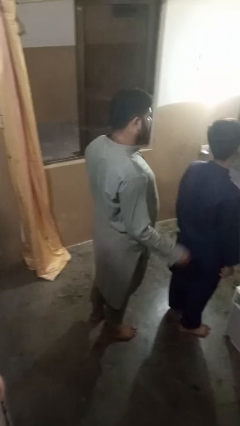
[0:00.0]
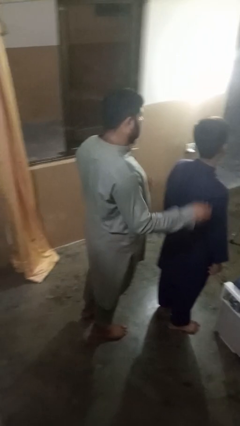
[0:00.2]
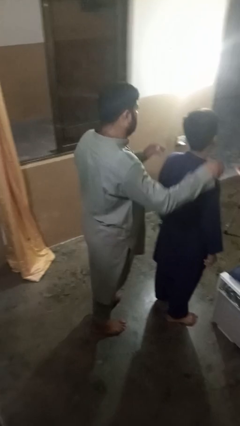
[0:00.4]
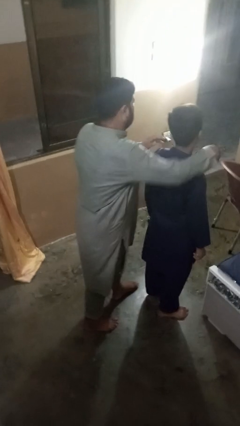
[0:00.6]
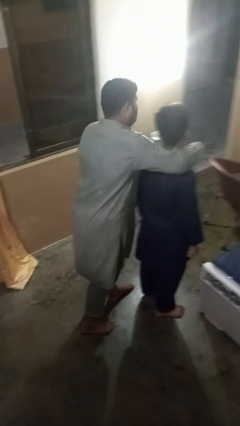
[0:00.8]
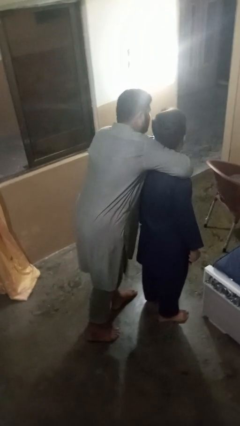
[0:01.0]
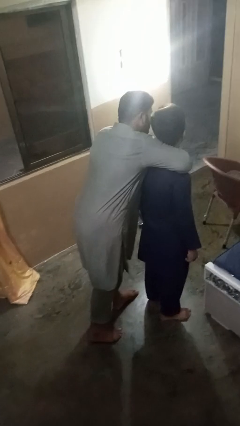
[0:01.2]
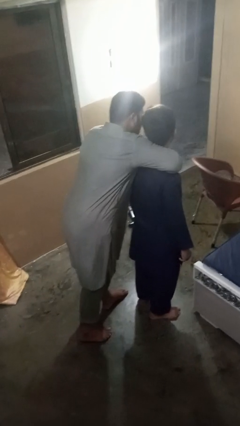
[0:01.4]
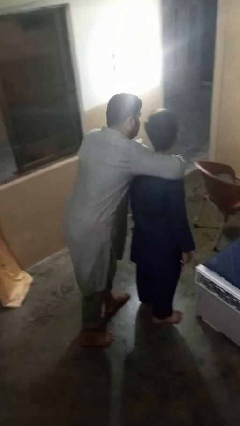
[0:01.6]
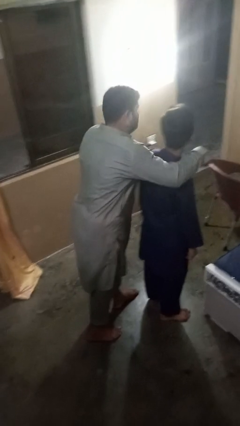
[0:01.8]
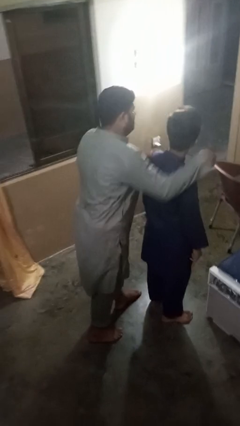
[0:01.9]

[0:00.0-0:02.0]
person hugs person from behind

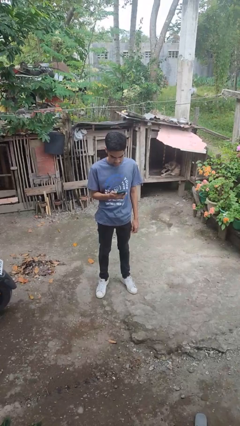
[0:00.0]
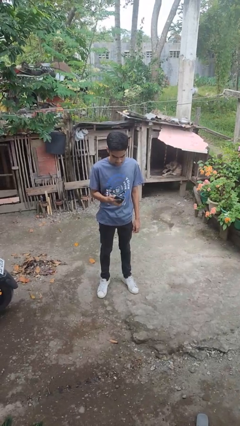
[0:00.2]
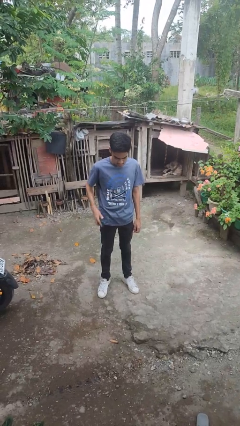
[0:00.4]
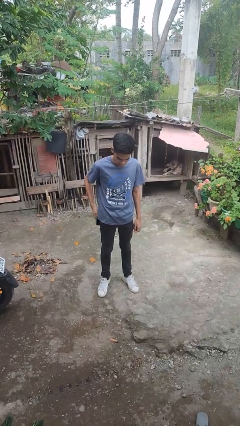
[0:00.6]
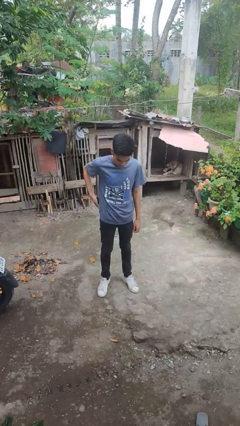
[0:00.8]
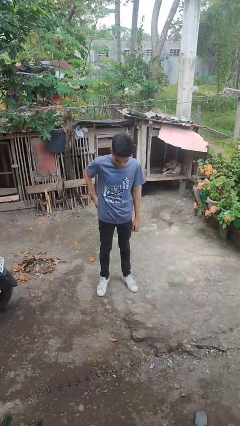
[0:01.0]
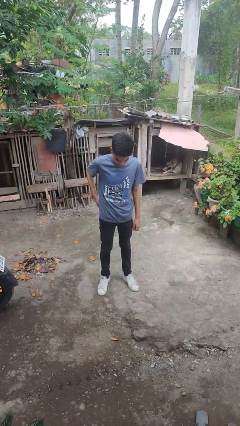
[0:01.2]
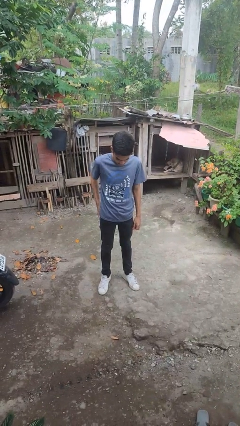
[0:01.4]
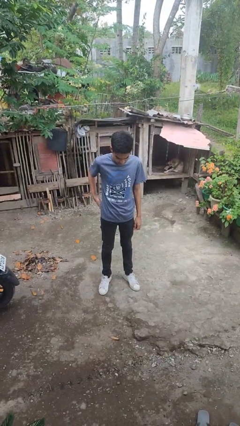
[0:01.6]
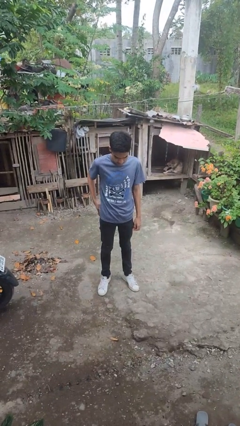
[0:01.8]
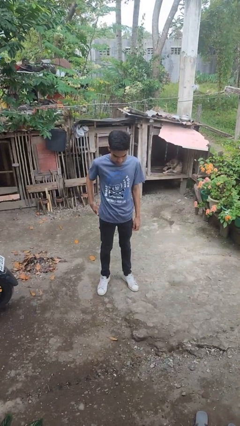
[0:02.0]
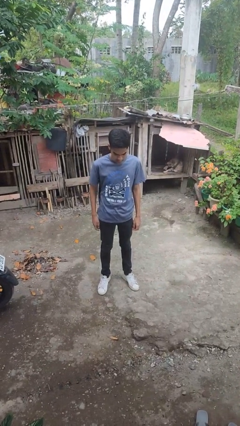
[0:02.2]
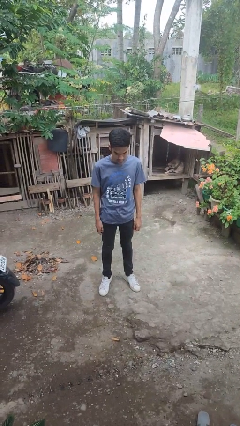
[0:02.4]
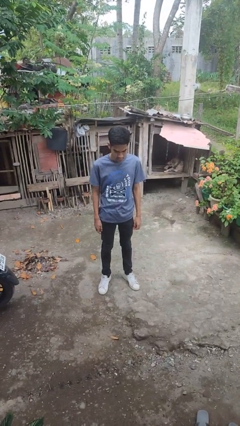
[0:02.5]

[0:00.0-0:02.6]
person puts phone into pocket

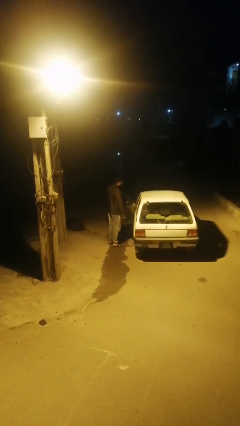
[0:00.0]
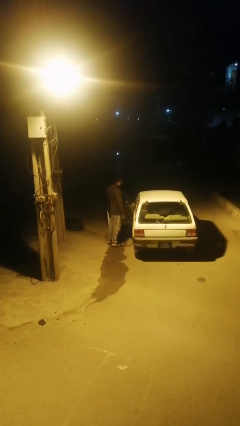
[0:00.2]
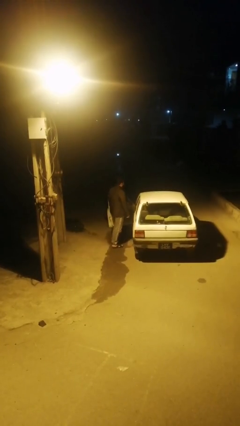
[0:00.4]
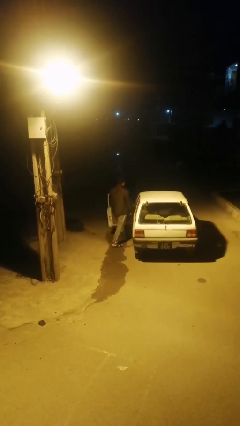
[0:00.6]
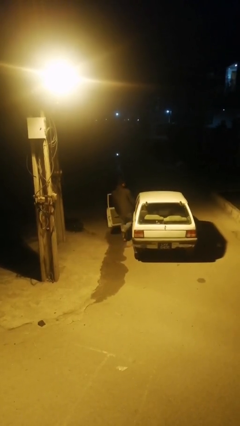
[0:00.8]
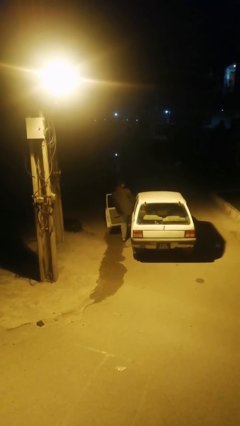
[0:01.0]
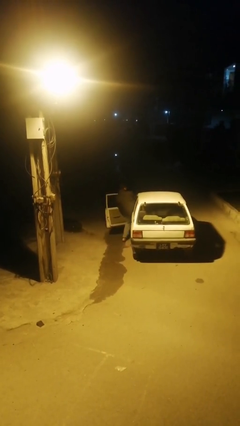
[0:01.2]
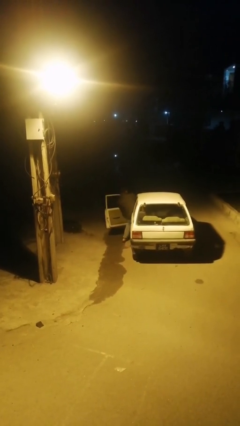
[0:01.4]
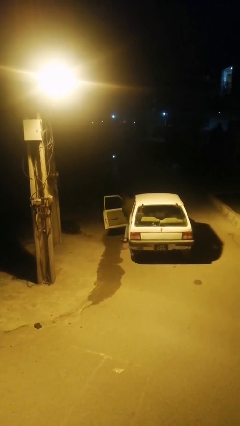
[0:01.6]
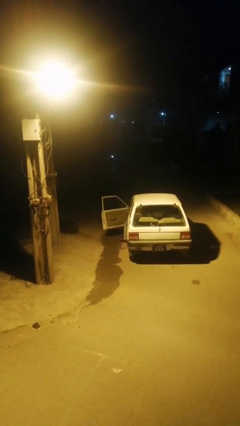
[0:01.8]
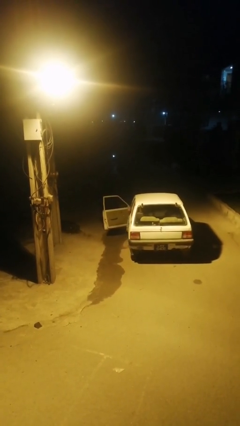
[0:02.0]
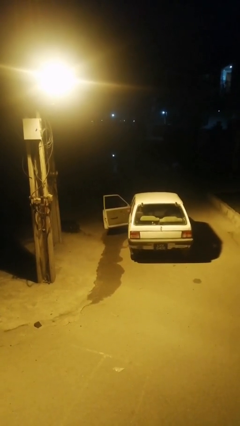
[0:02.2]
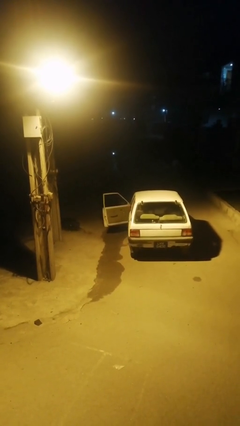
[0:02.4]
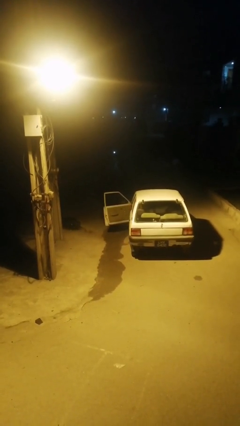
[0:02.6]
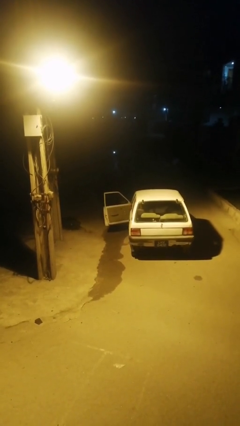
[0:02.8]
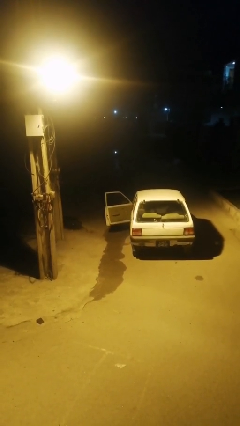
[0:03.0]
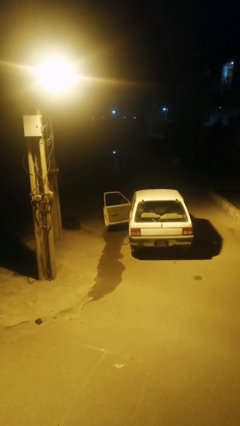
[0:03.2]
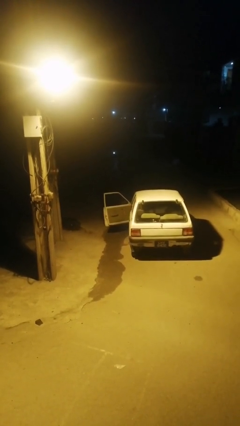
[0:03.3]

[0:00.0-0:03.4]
person enters car

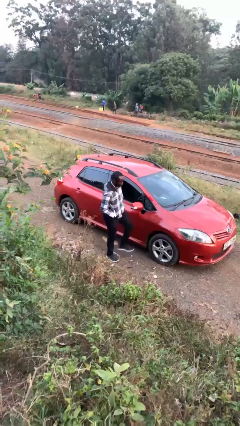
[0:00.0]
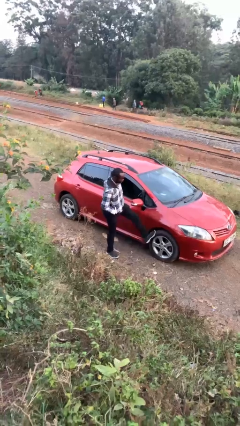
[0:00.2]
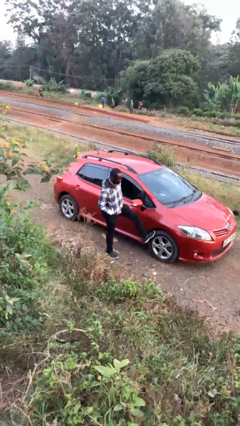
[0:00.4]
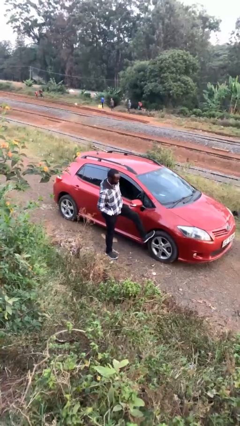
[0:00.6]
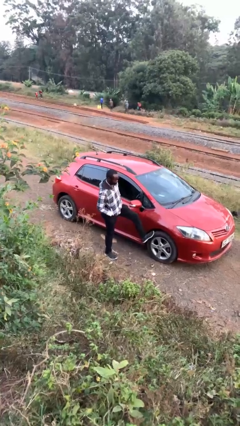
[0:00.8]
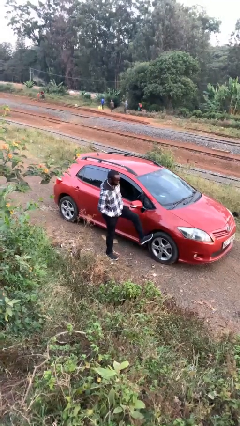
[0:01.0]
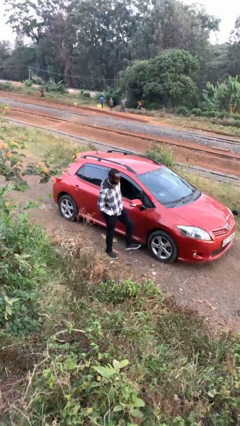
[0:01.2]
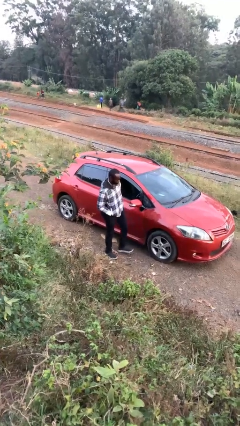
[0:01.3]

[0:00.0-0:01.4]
person kicks car tires

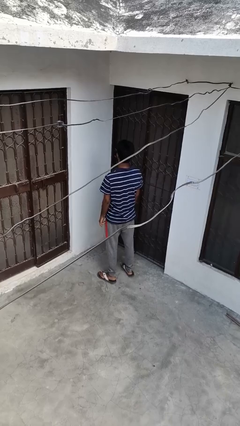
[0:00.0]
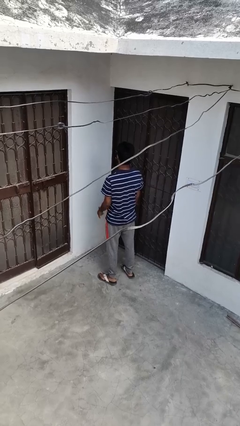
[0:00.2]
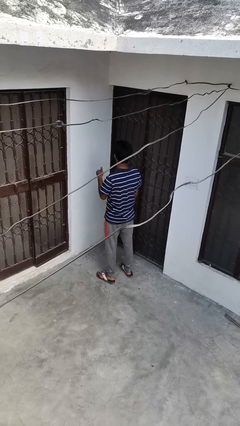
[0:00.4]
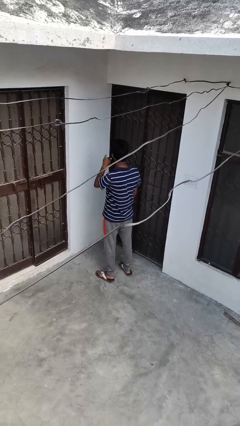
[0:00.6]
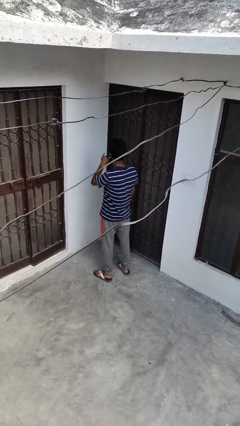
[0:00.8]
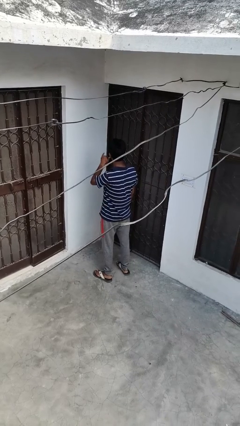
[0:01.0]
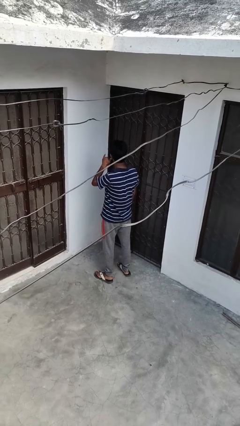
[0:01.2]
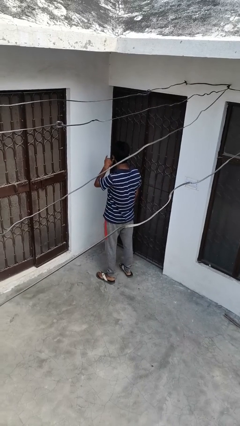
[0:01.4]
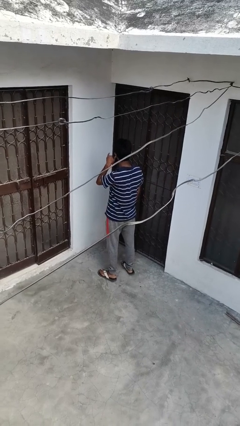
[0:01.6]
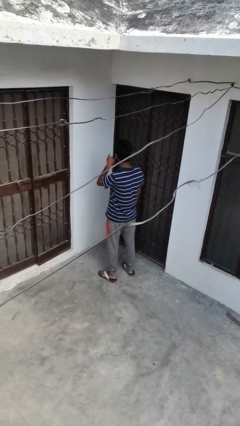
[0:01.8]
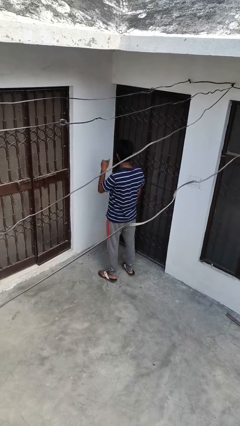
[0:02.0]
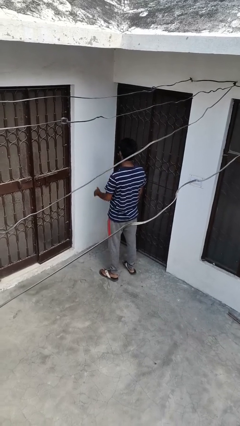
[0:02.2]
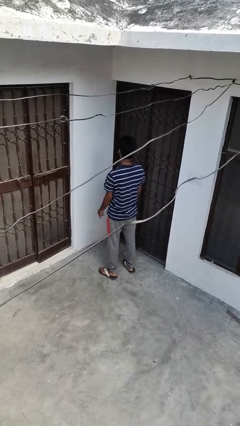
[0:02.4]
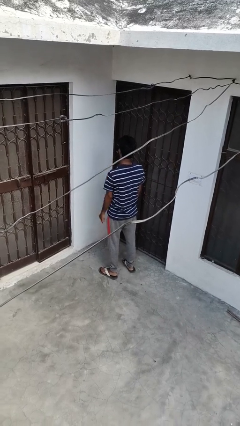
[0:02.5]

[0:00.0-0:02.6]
person gestures call me

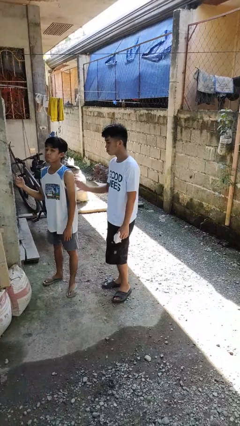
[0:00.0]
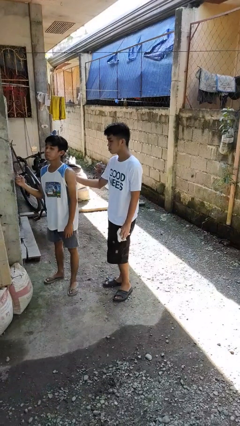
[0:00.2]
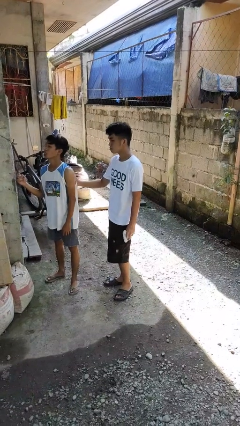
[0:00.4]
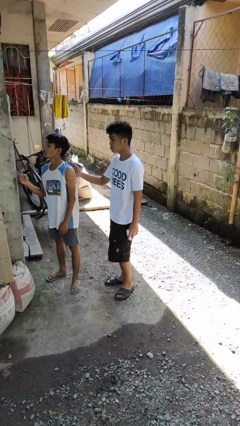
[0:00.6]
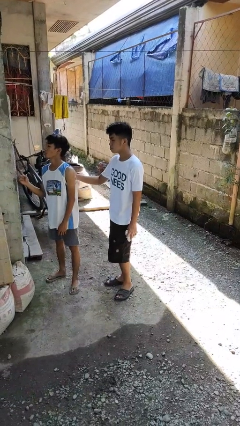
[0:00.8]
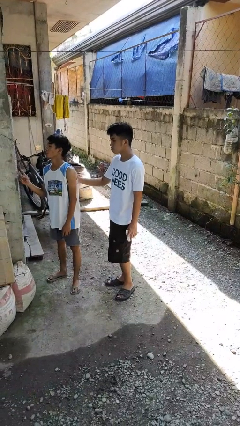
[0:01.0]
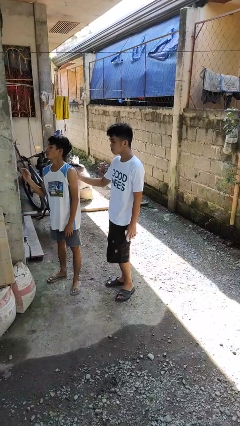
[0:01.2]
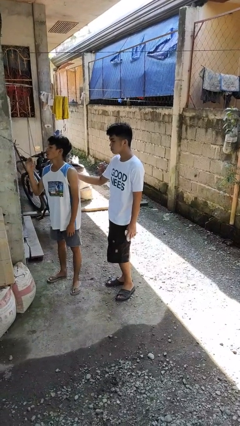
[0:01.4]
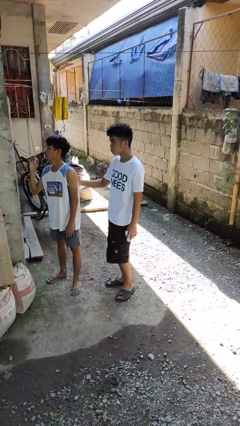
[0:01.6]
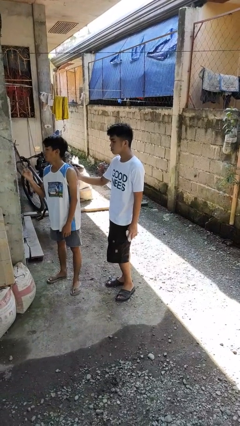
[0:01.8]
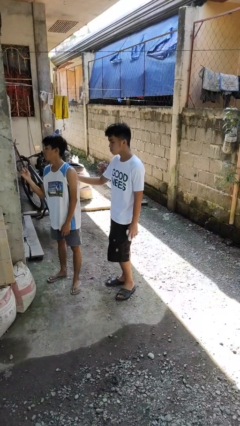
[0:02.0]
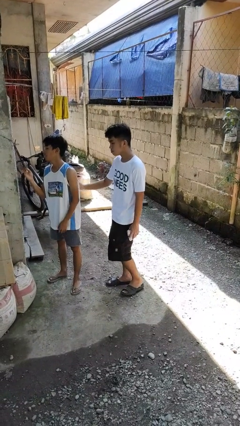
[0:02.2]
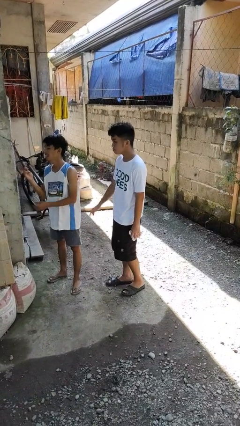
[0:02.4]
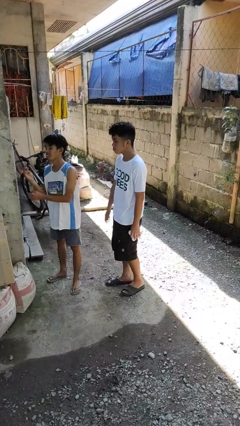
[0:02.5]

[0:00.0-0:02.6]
person touches back of person

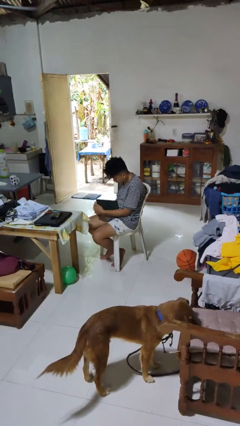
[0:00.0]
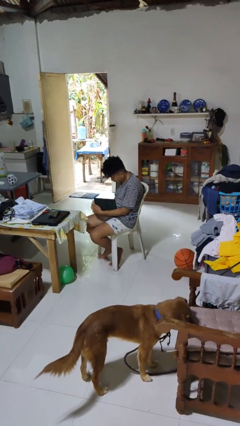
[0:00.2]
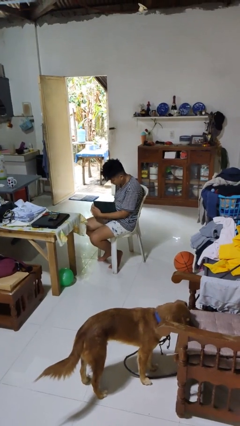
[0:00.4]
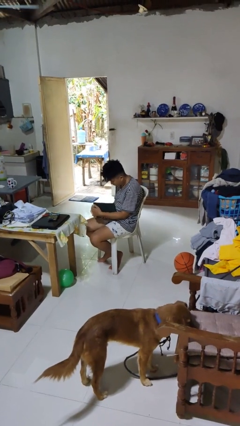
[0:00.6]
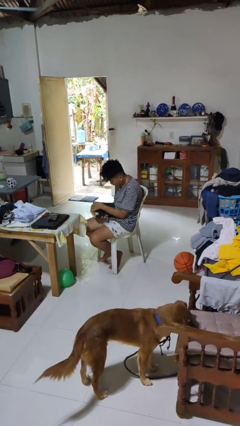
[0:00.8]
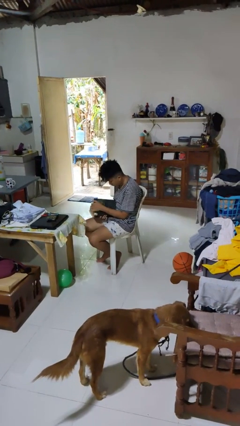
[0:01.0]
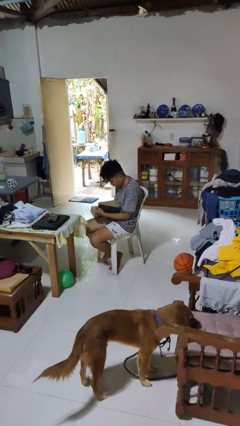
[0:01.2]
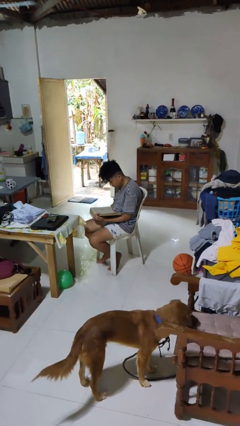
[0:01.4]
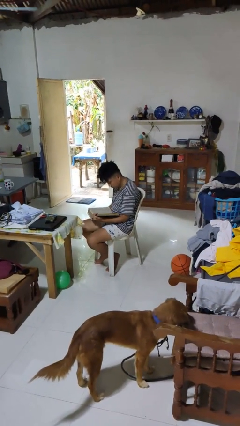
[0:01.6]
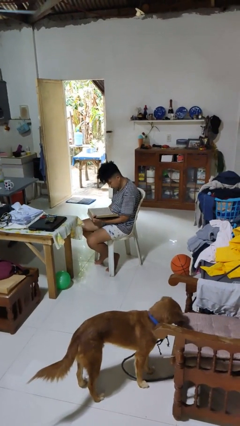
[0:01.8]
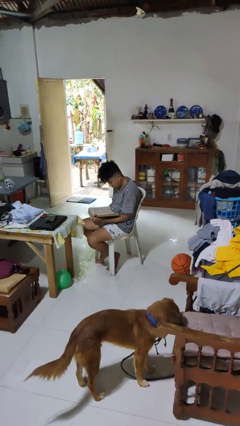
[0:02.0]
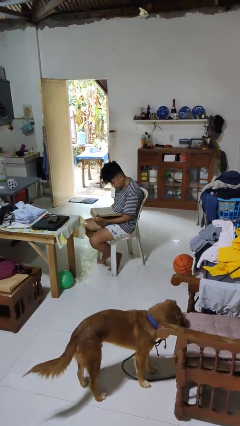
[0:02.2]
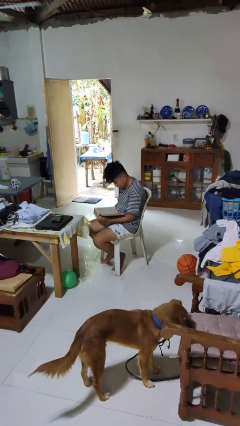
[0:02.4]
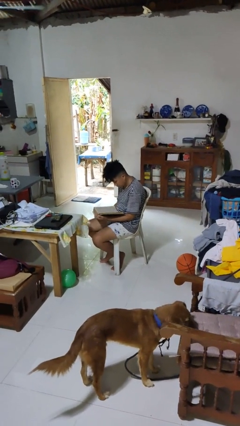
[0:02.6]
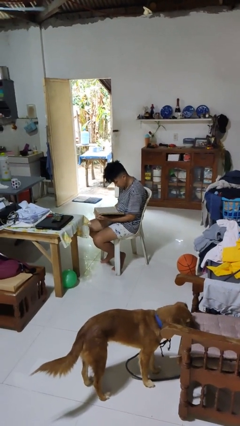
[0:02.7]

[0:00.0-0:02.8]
person reads book
